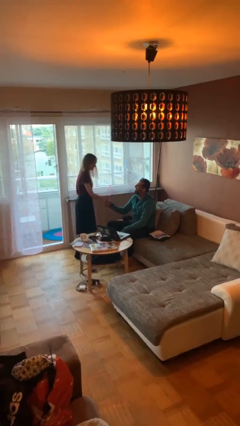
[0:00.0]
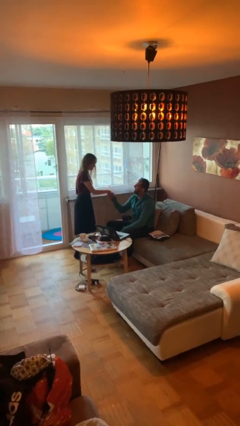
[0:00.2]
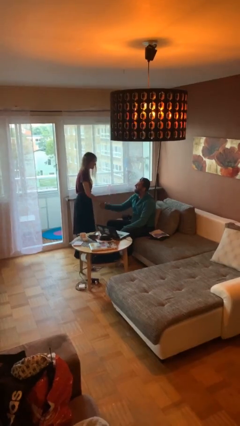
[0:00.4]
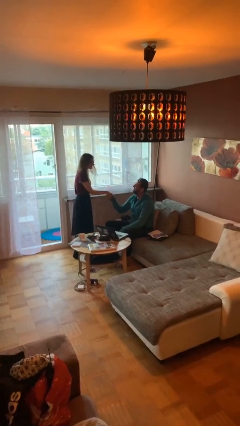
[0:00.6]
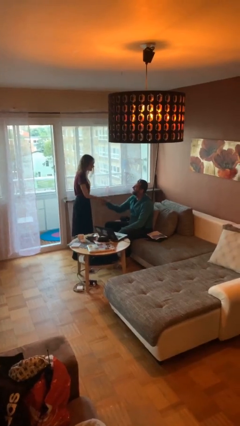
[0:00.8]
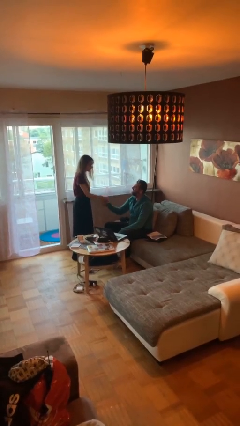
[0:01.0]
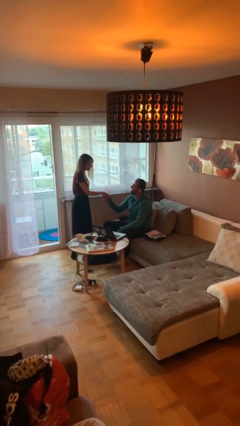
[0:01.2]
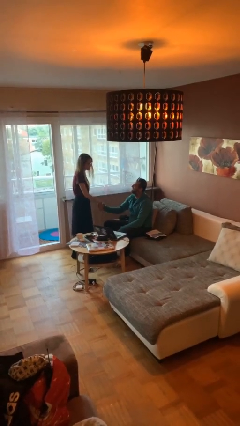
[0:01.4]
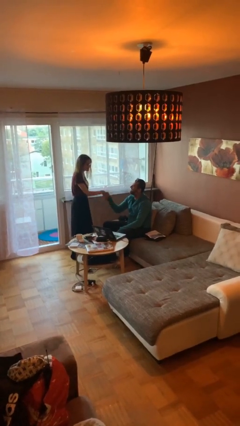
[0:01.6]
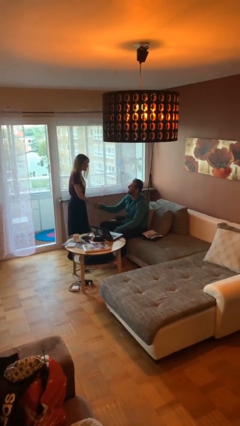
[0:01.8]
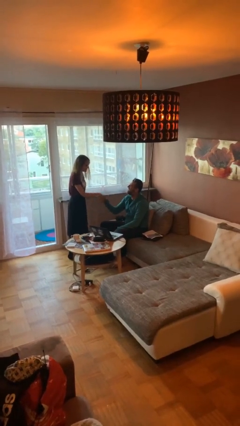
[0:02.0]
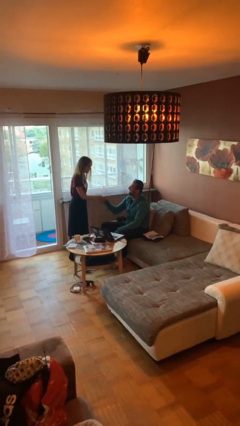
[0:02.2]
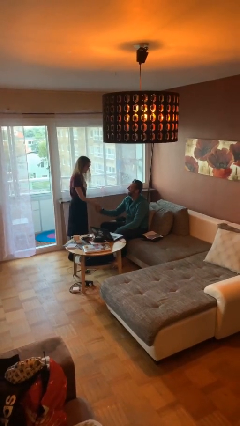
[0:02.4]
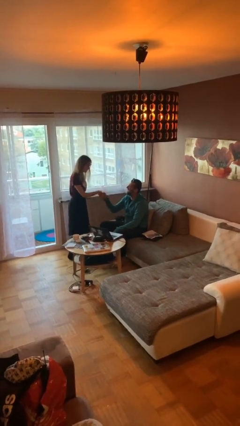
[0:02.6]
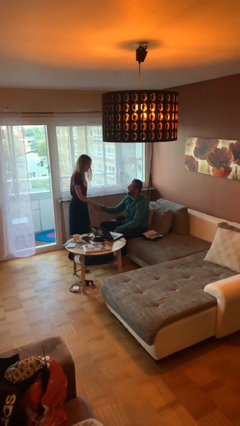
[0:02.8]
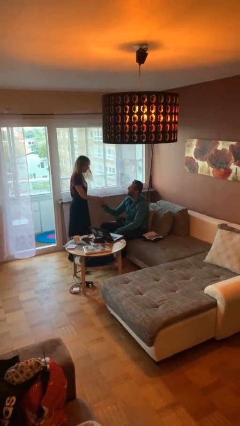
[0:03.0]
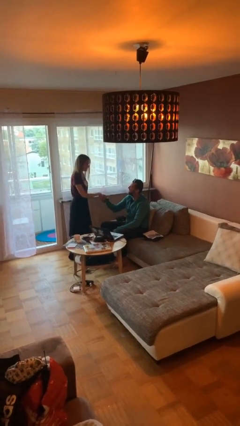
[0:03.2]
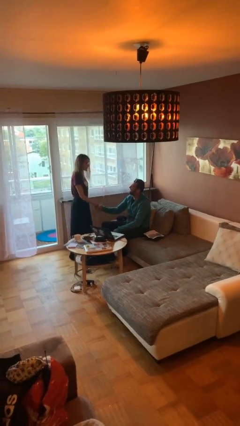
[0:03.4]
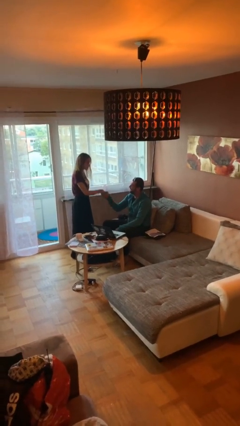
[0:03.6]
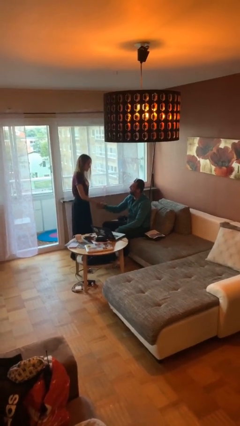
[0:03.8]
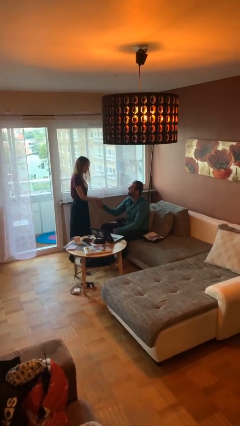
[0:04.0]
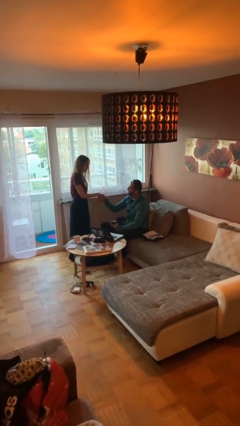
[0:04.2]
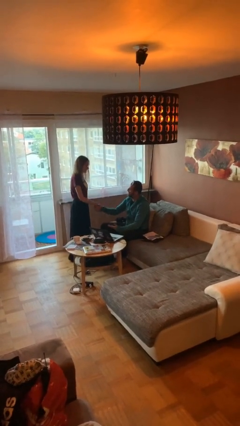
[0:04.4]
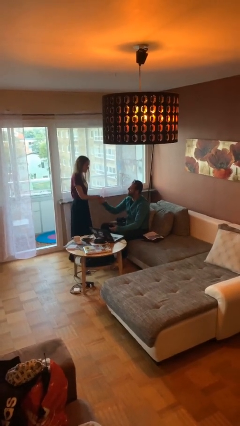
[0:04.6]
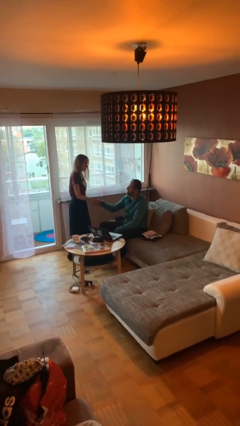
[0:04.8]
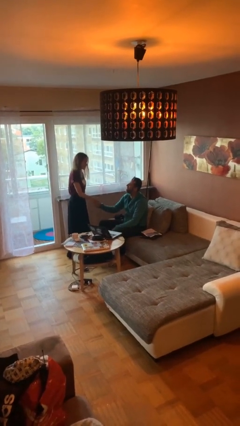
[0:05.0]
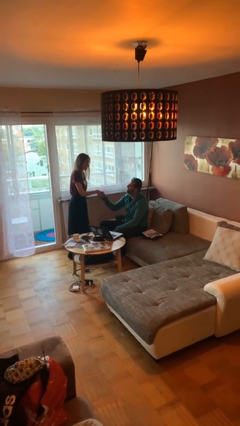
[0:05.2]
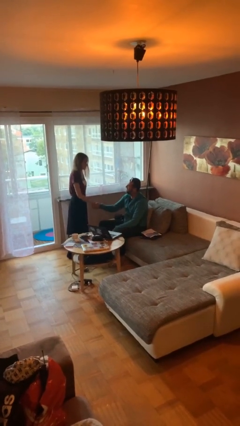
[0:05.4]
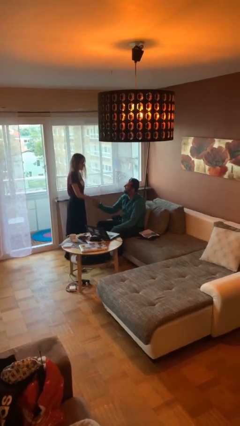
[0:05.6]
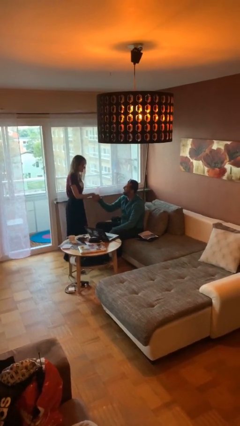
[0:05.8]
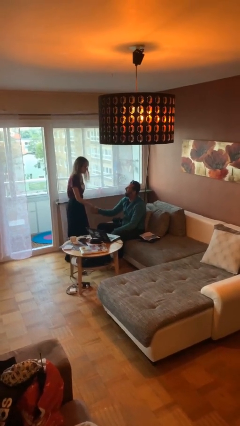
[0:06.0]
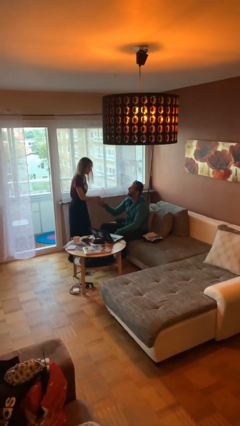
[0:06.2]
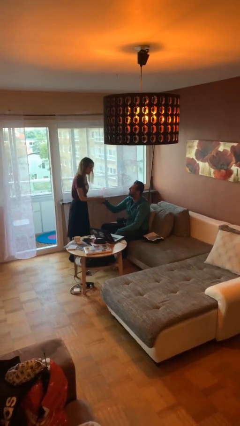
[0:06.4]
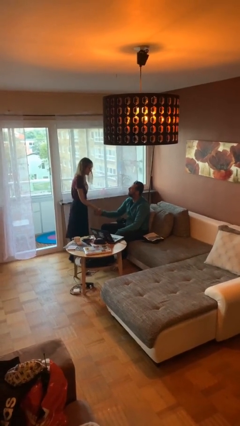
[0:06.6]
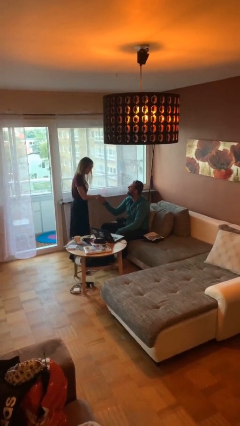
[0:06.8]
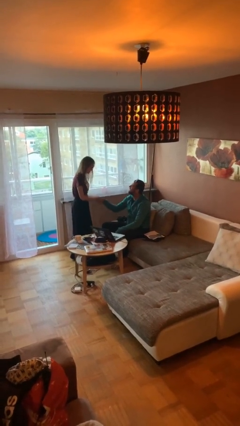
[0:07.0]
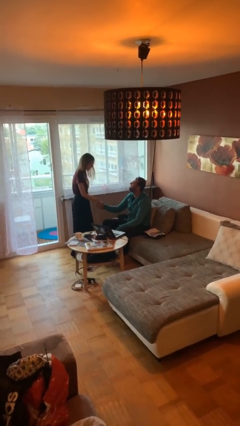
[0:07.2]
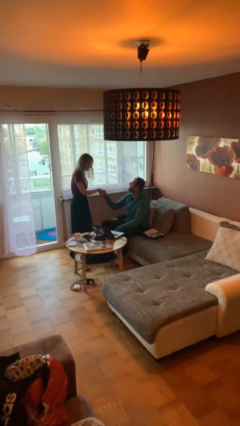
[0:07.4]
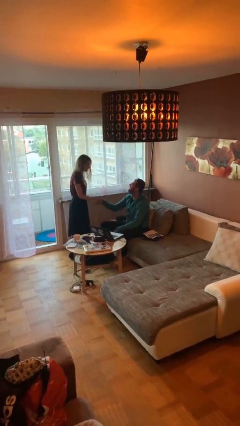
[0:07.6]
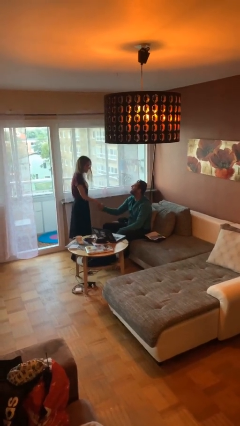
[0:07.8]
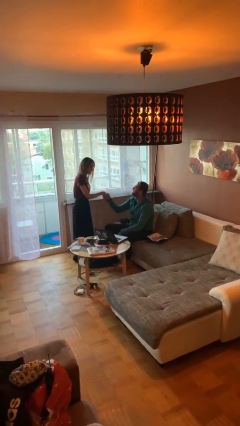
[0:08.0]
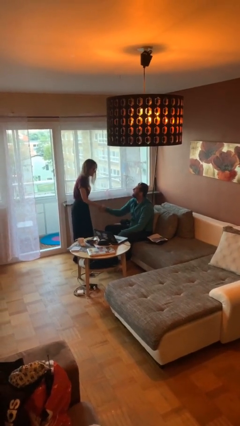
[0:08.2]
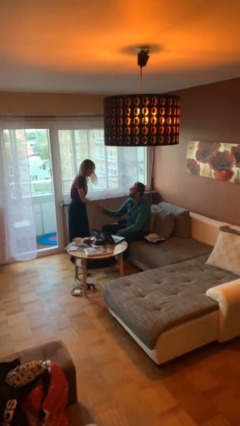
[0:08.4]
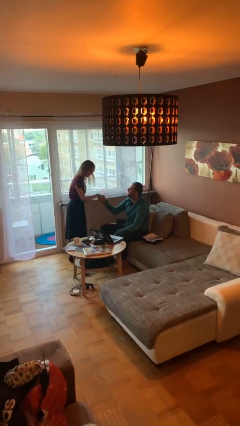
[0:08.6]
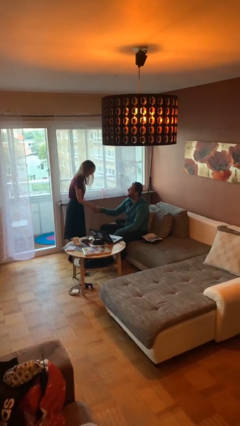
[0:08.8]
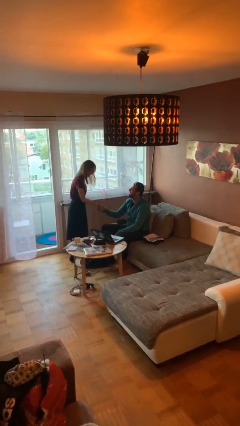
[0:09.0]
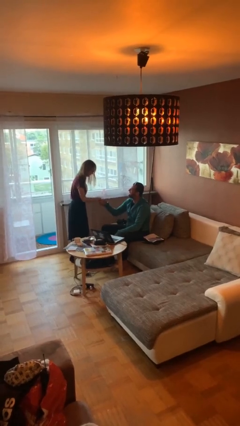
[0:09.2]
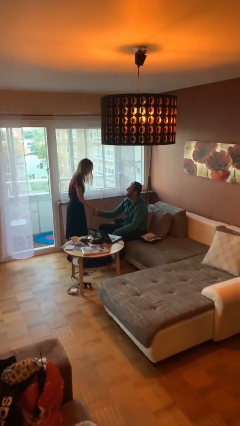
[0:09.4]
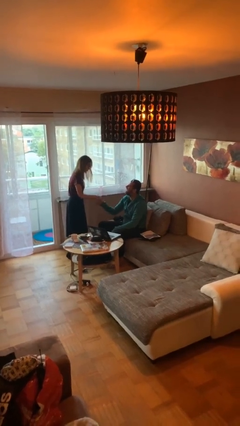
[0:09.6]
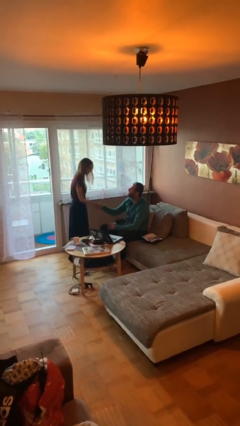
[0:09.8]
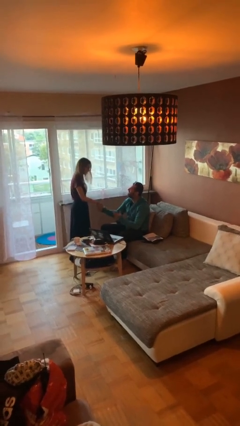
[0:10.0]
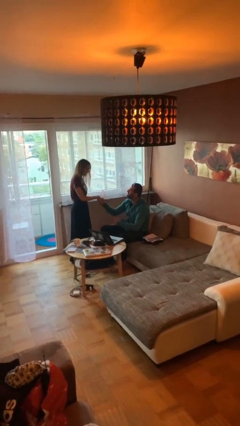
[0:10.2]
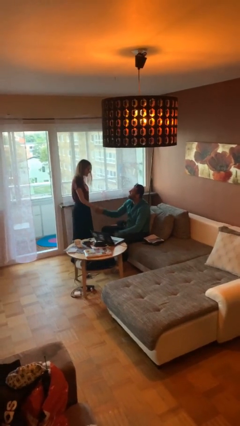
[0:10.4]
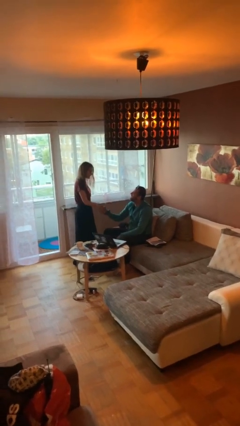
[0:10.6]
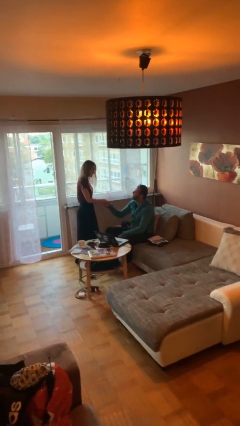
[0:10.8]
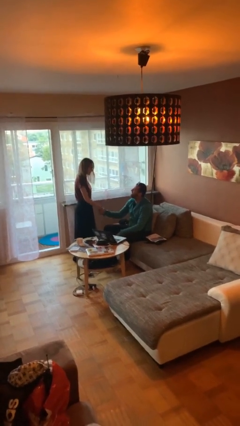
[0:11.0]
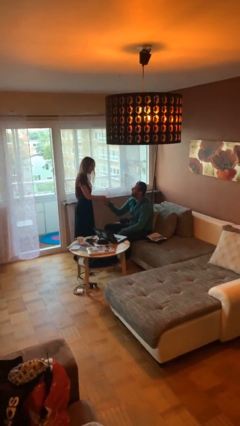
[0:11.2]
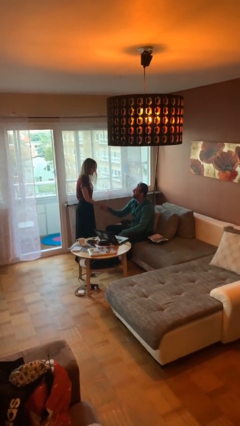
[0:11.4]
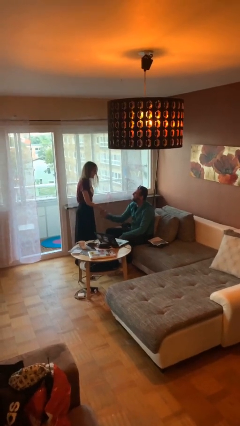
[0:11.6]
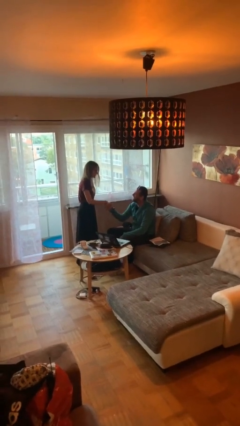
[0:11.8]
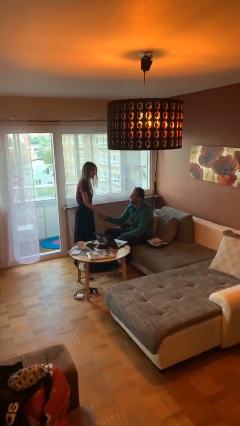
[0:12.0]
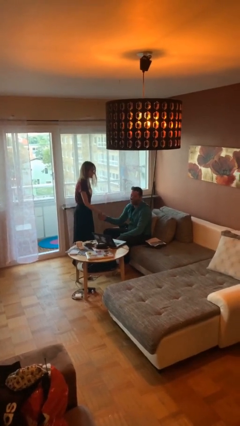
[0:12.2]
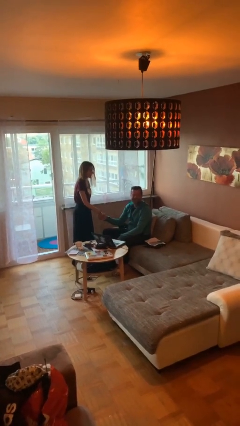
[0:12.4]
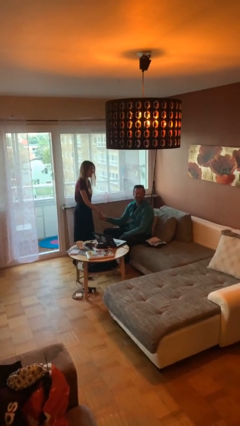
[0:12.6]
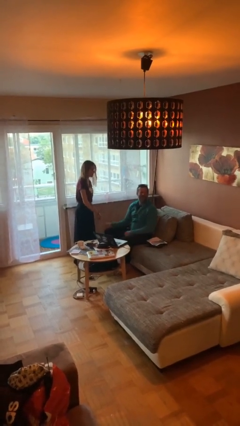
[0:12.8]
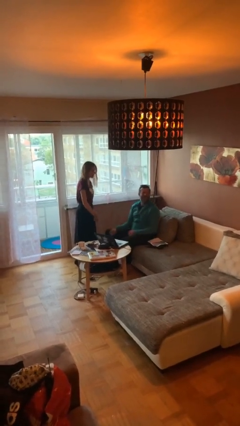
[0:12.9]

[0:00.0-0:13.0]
person shakes hand

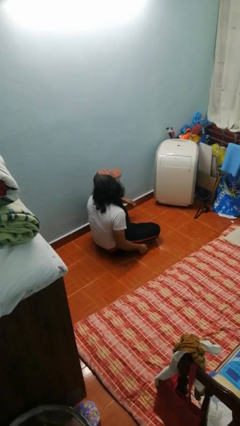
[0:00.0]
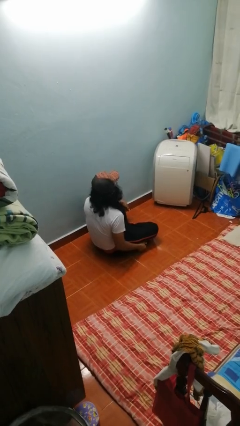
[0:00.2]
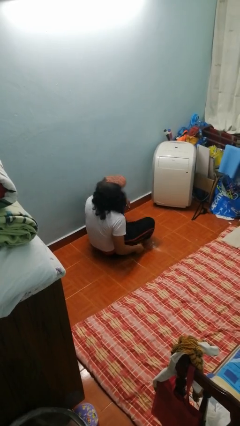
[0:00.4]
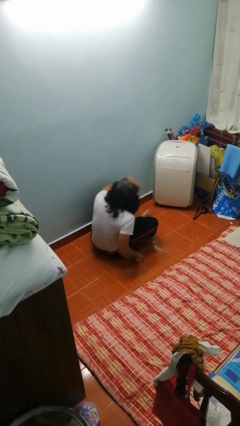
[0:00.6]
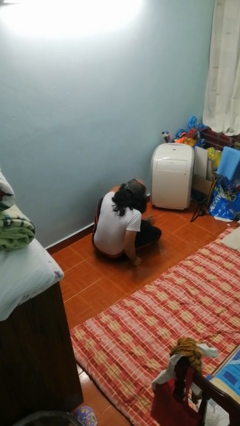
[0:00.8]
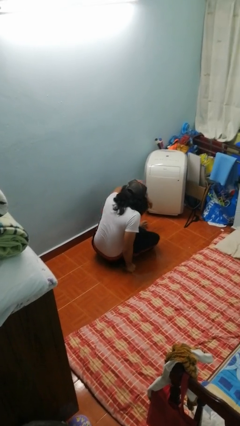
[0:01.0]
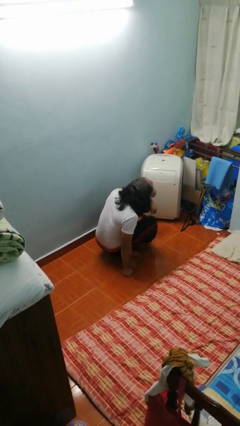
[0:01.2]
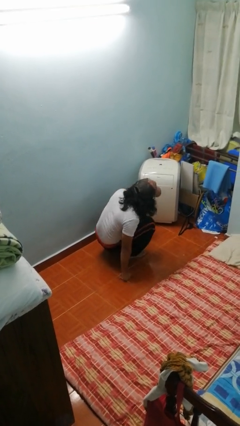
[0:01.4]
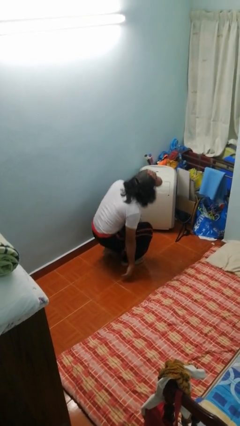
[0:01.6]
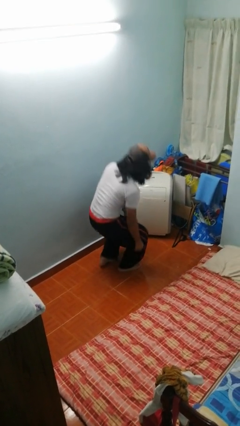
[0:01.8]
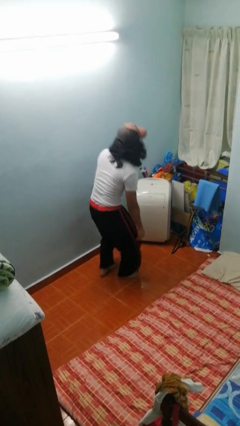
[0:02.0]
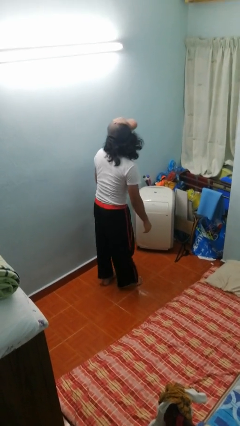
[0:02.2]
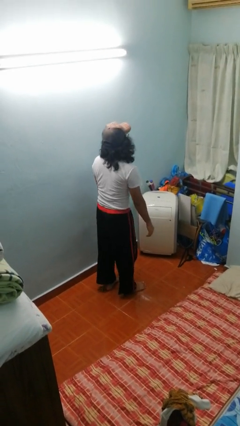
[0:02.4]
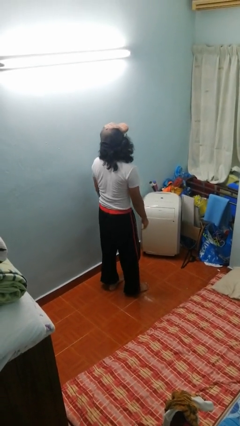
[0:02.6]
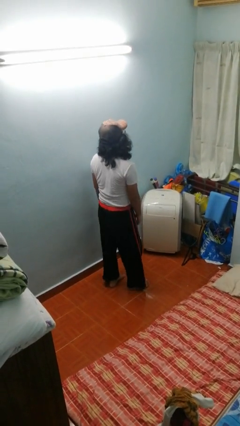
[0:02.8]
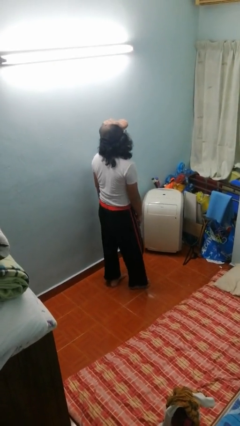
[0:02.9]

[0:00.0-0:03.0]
person stands up from floor

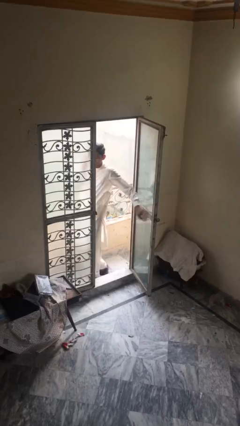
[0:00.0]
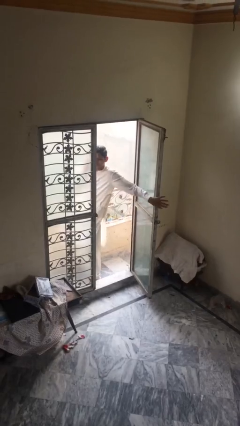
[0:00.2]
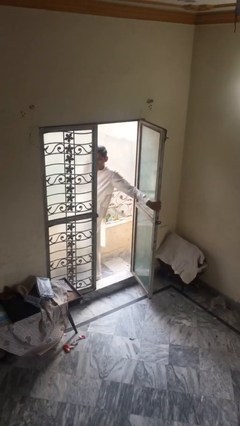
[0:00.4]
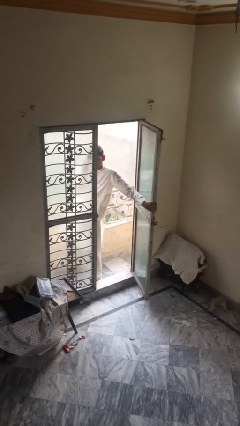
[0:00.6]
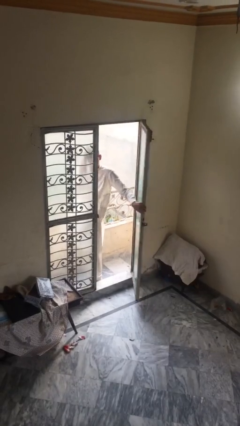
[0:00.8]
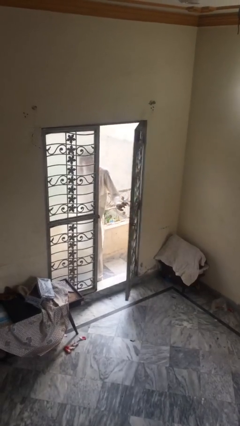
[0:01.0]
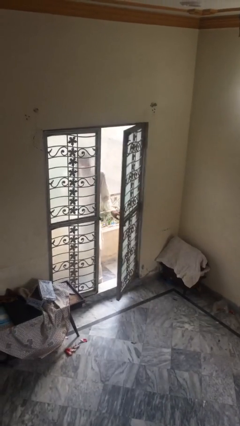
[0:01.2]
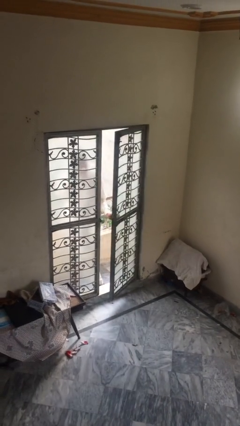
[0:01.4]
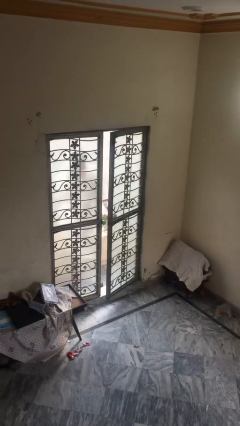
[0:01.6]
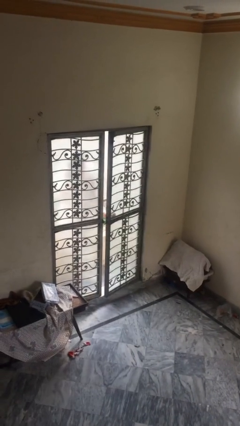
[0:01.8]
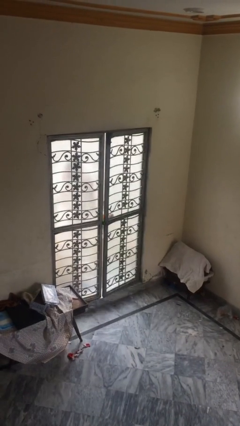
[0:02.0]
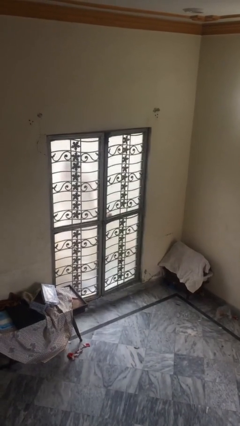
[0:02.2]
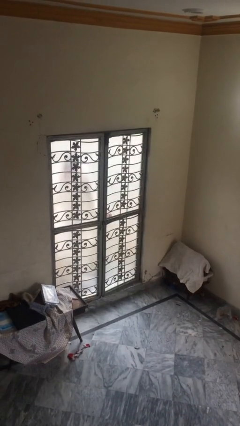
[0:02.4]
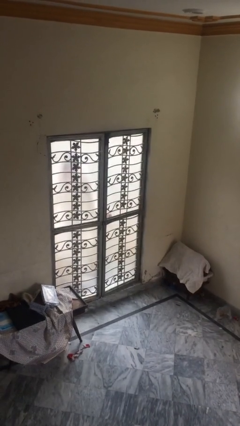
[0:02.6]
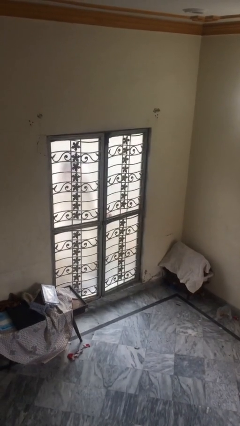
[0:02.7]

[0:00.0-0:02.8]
person closes facility door
